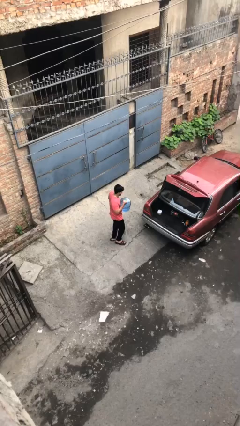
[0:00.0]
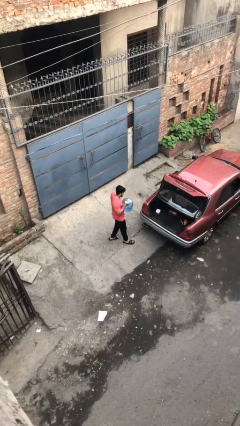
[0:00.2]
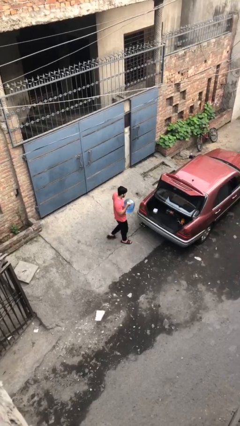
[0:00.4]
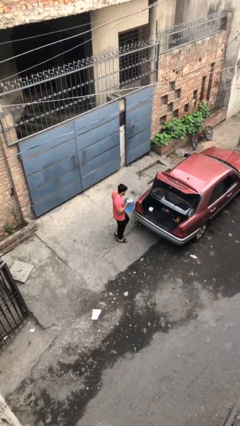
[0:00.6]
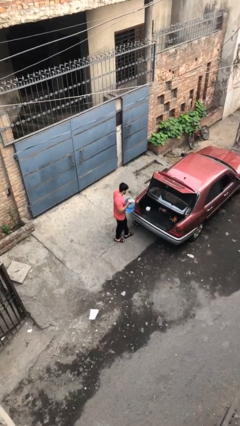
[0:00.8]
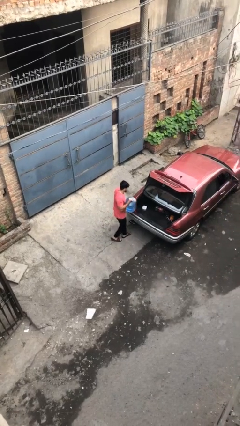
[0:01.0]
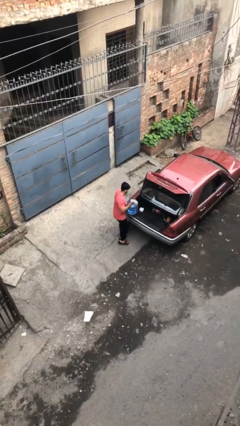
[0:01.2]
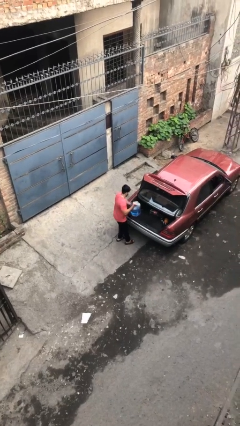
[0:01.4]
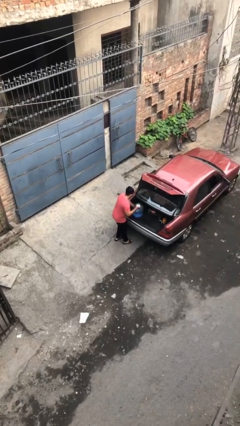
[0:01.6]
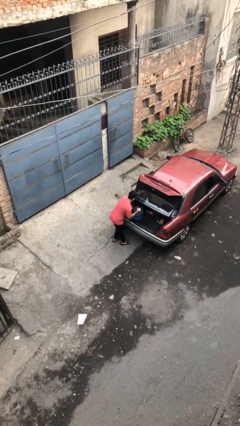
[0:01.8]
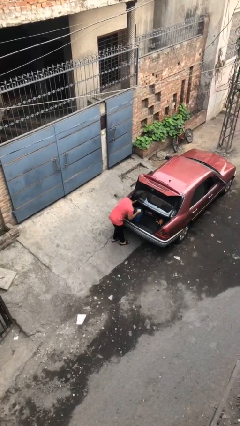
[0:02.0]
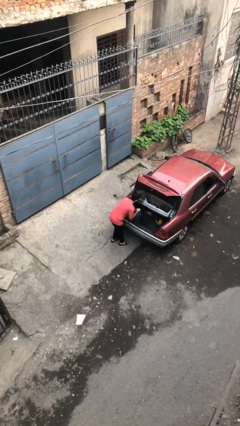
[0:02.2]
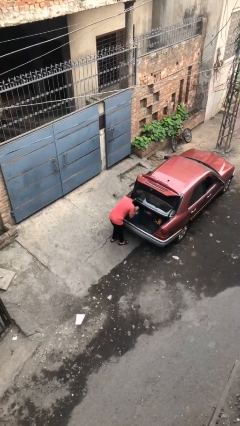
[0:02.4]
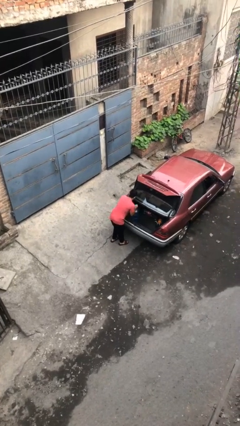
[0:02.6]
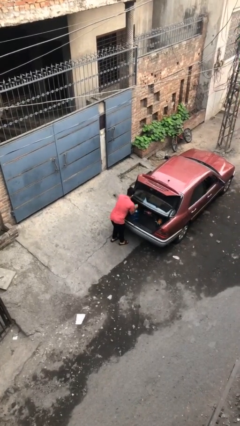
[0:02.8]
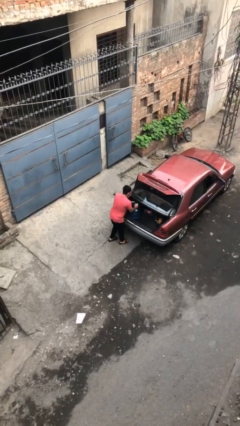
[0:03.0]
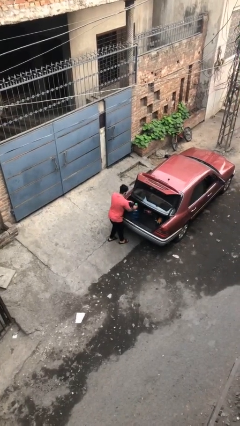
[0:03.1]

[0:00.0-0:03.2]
person loads car

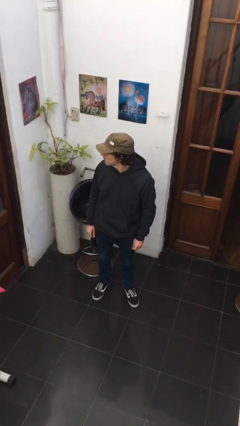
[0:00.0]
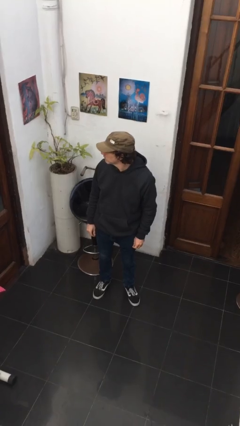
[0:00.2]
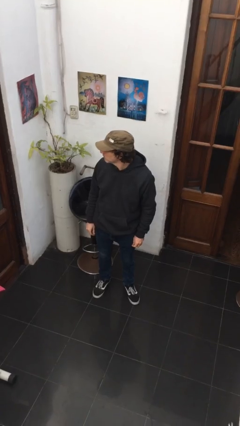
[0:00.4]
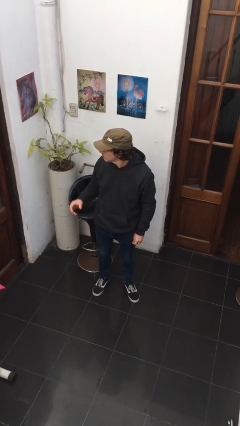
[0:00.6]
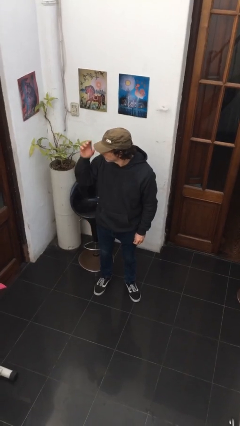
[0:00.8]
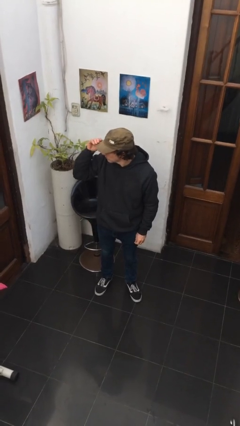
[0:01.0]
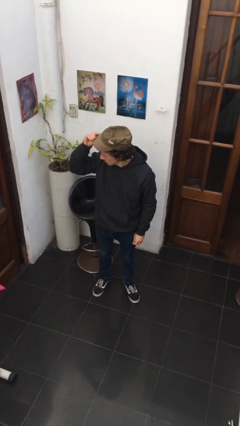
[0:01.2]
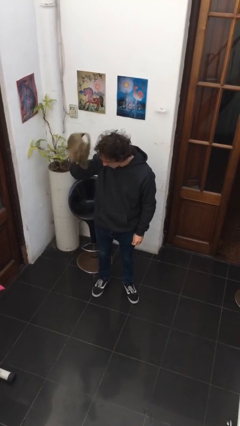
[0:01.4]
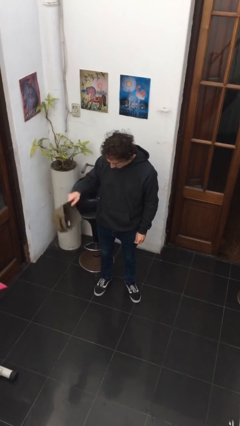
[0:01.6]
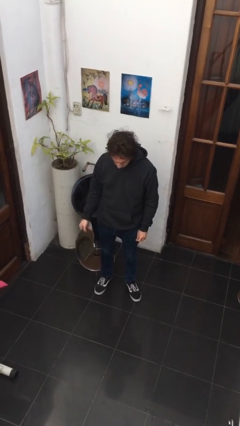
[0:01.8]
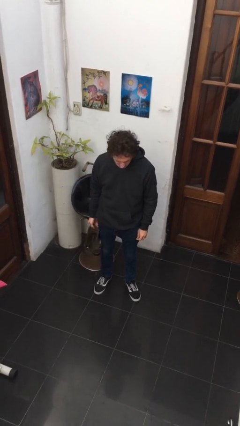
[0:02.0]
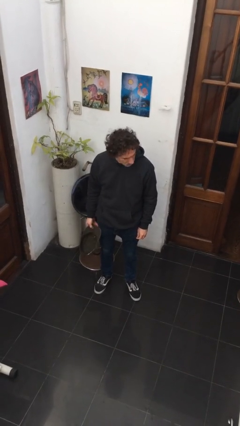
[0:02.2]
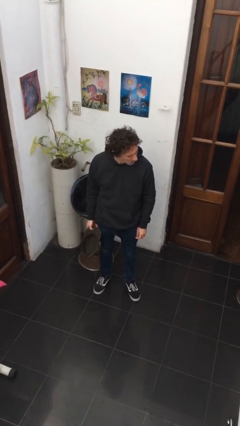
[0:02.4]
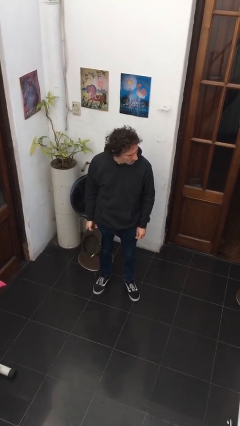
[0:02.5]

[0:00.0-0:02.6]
person takes off hat

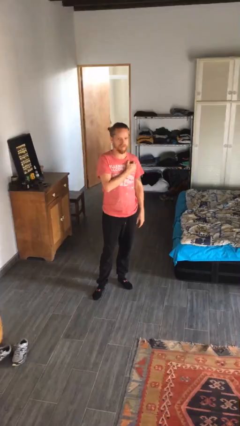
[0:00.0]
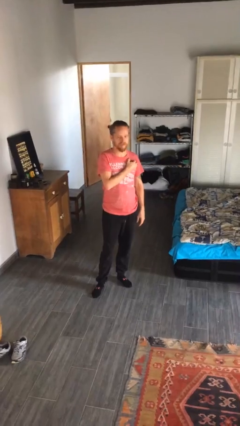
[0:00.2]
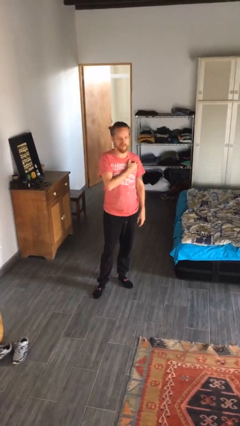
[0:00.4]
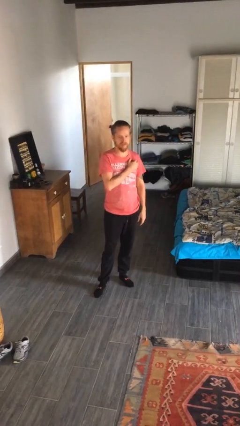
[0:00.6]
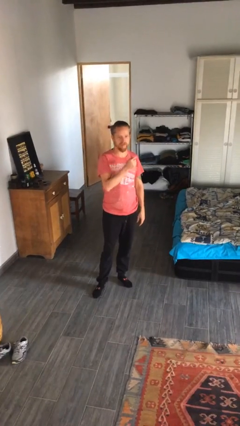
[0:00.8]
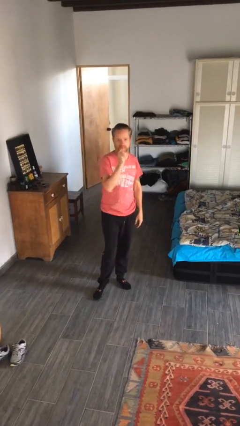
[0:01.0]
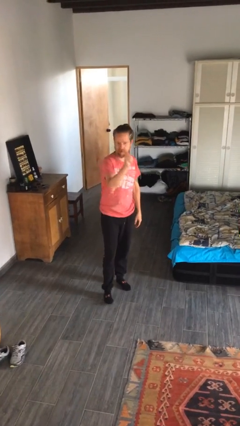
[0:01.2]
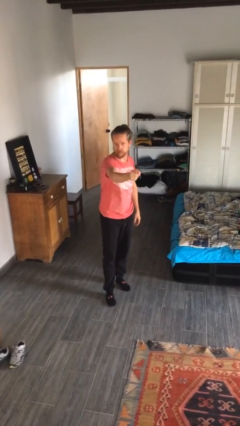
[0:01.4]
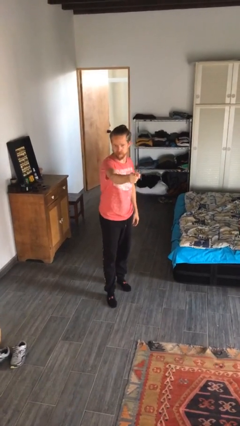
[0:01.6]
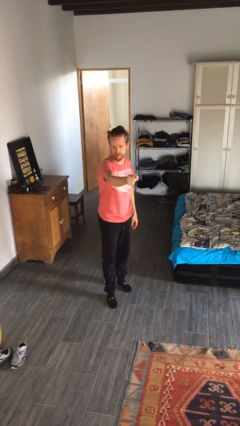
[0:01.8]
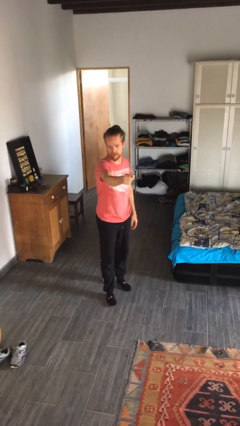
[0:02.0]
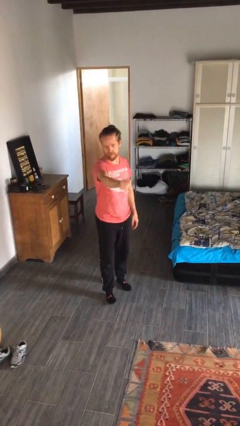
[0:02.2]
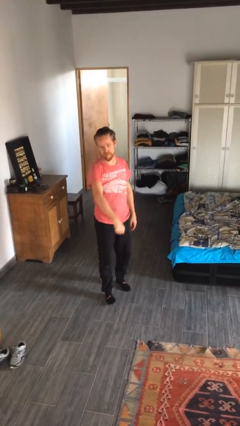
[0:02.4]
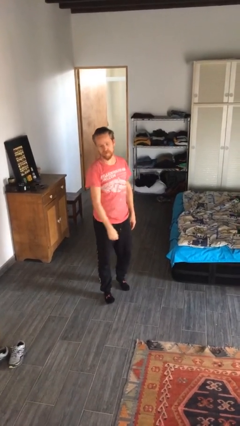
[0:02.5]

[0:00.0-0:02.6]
person points at person

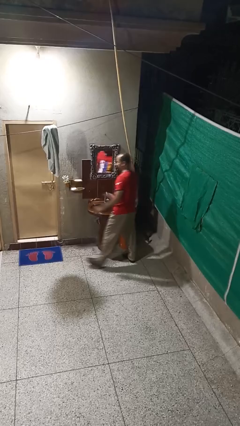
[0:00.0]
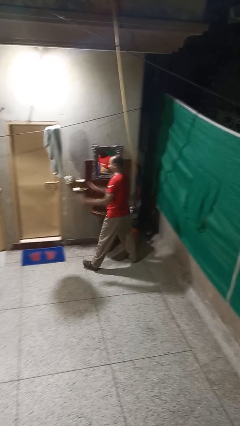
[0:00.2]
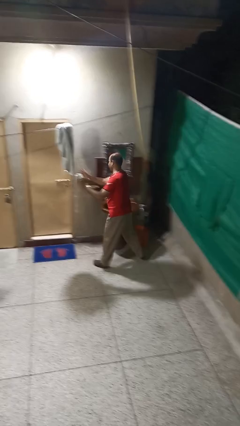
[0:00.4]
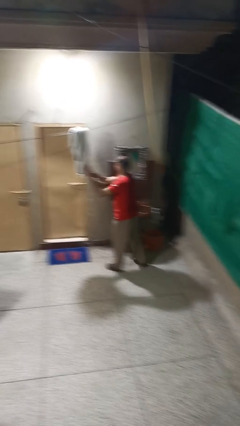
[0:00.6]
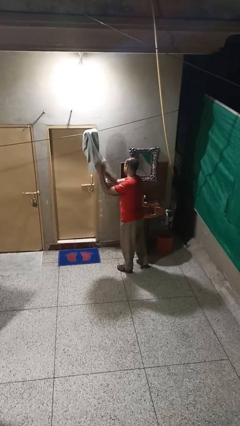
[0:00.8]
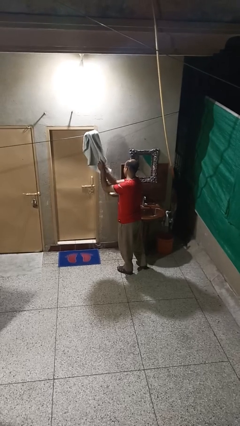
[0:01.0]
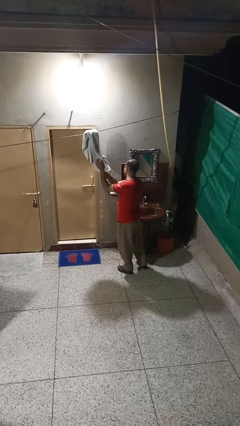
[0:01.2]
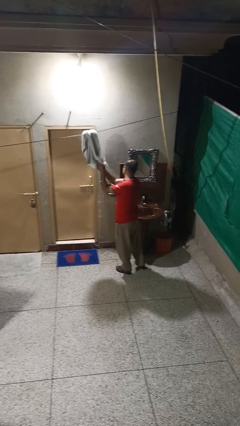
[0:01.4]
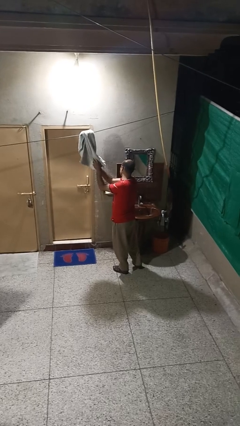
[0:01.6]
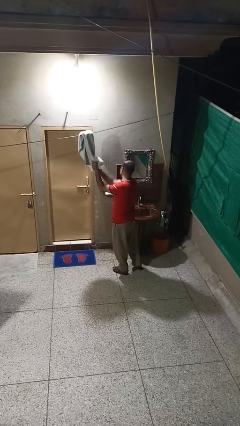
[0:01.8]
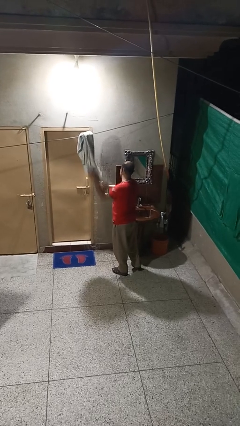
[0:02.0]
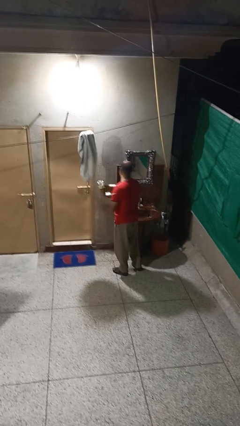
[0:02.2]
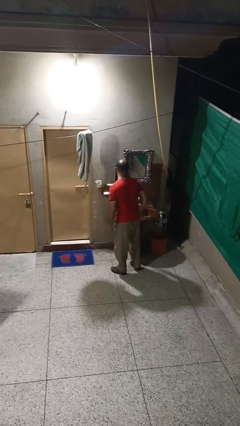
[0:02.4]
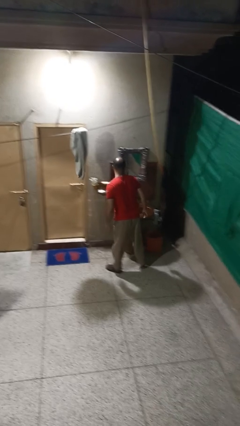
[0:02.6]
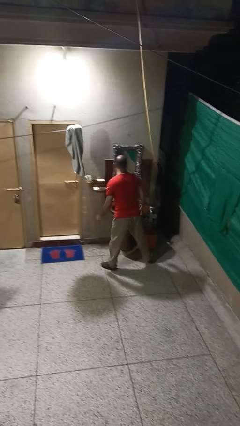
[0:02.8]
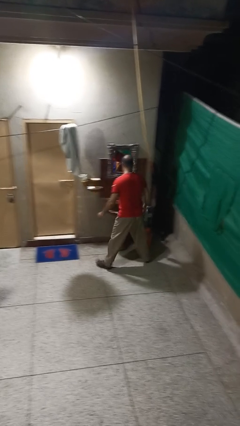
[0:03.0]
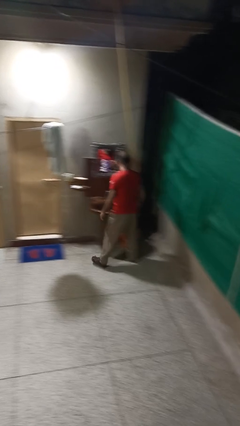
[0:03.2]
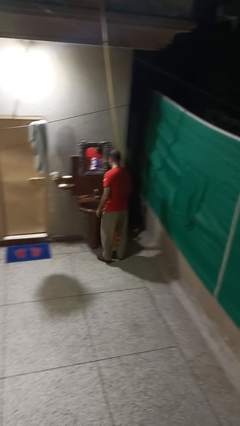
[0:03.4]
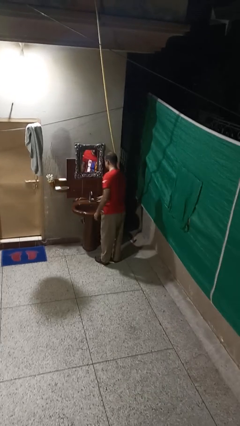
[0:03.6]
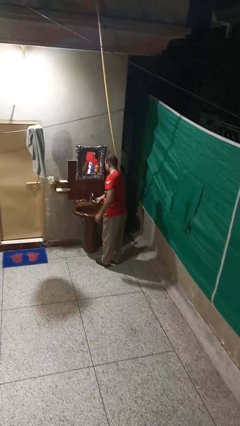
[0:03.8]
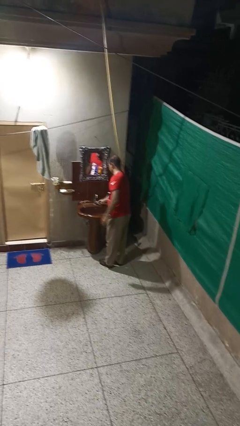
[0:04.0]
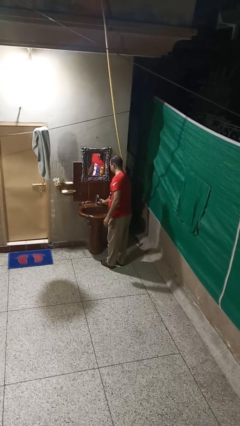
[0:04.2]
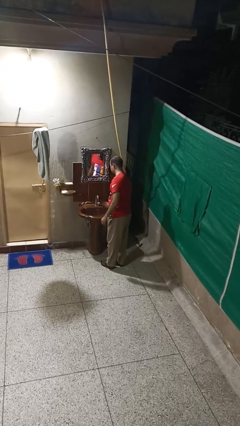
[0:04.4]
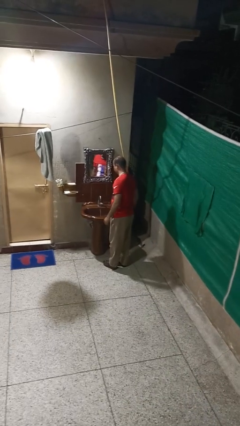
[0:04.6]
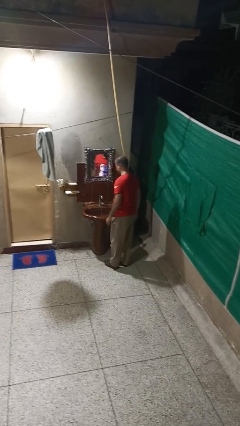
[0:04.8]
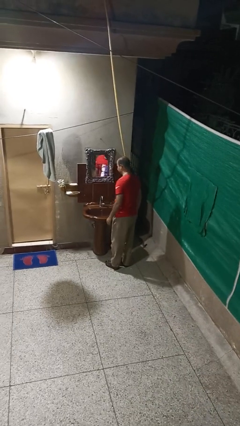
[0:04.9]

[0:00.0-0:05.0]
person dries hands with towel

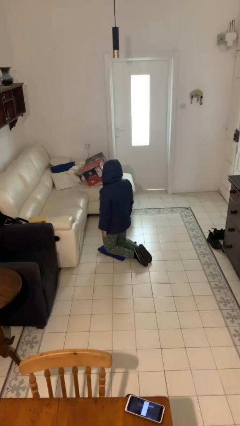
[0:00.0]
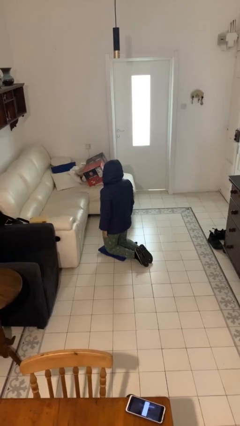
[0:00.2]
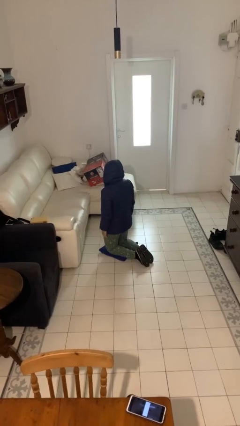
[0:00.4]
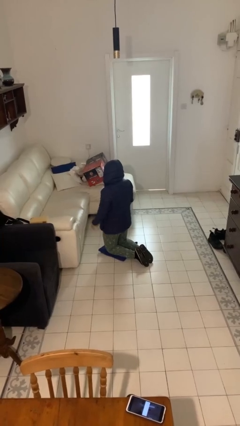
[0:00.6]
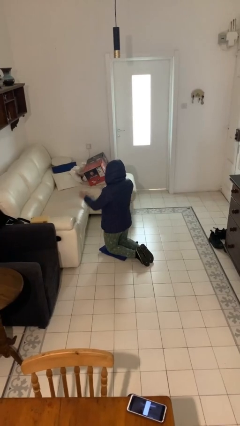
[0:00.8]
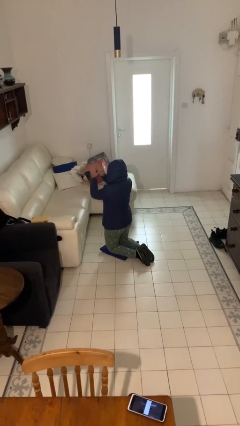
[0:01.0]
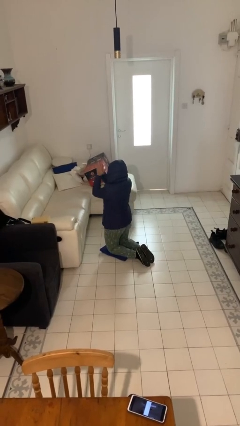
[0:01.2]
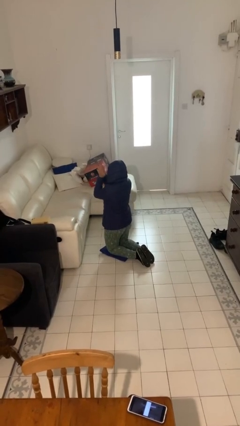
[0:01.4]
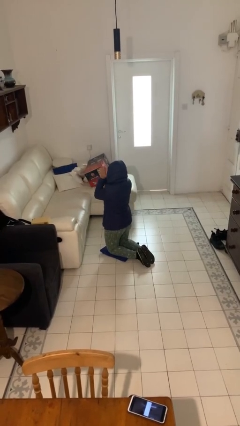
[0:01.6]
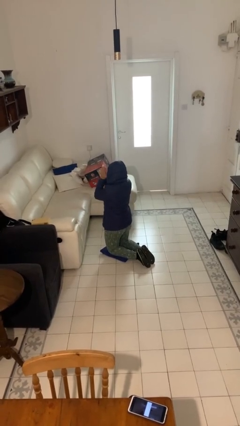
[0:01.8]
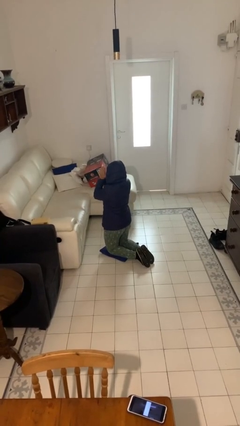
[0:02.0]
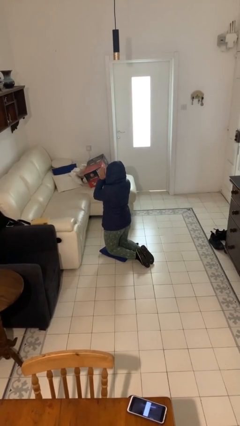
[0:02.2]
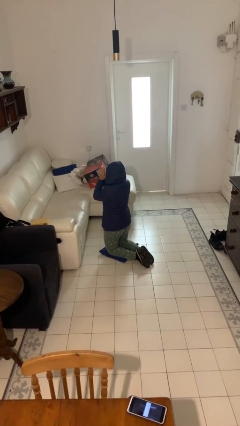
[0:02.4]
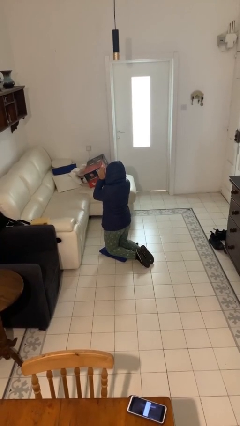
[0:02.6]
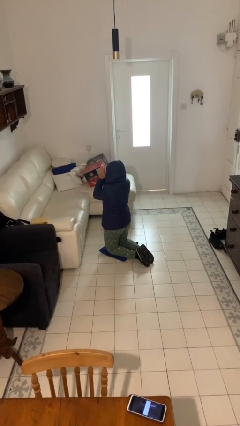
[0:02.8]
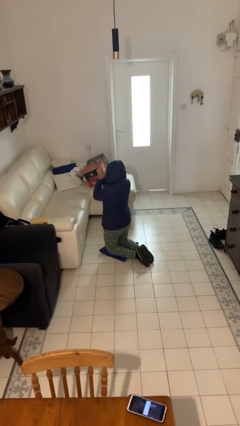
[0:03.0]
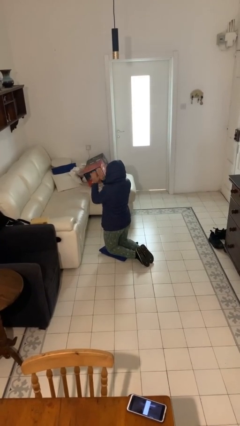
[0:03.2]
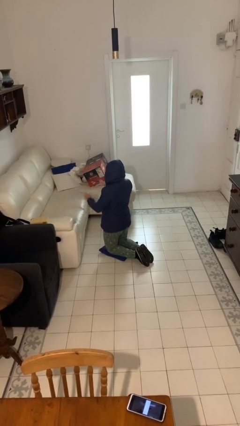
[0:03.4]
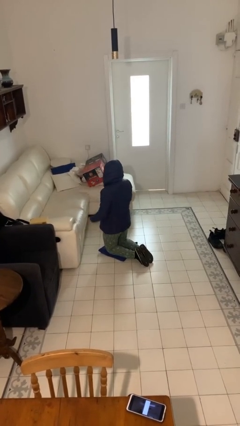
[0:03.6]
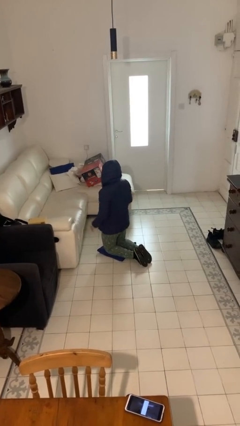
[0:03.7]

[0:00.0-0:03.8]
person prays

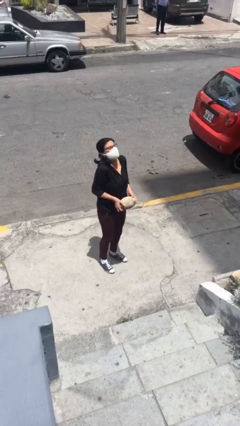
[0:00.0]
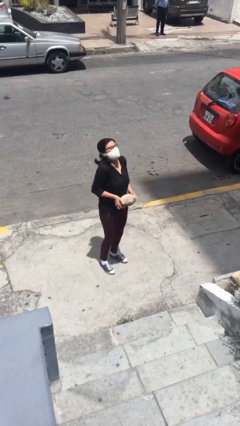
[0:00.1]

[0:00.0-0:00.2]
person carries heavy object
